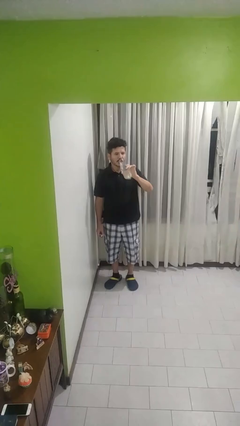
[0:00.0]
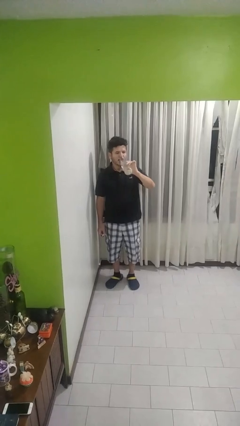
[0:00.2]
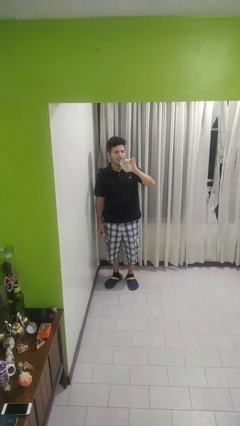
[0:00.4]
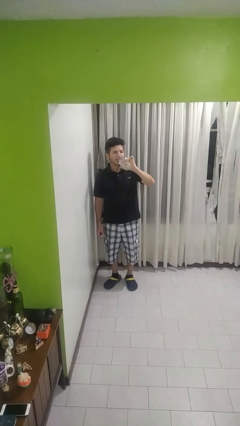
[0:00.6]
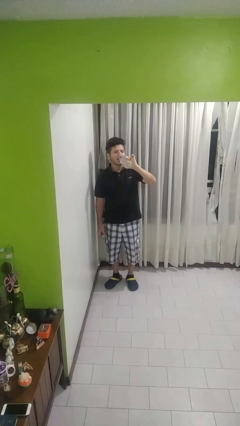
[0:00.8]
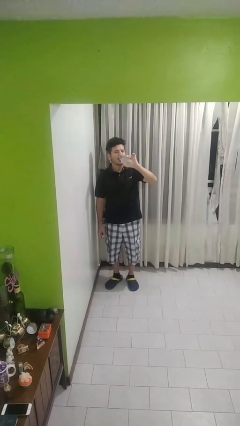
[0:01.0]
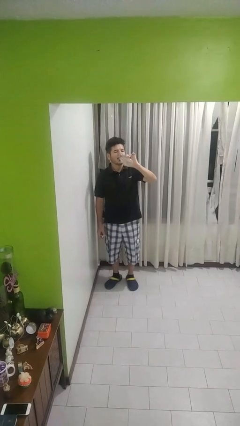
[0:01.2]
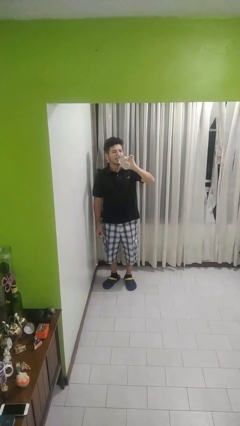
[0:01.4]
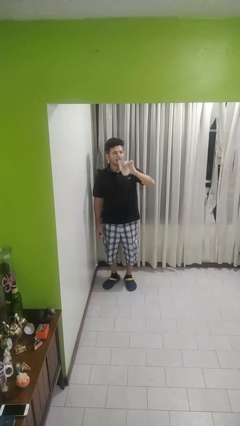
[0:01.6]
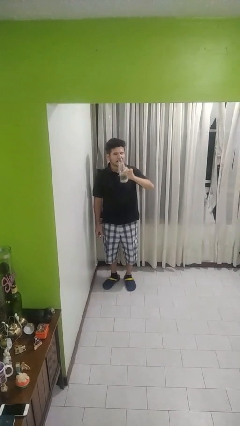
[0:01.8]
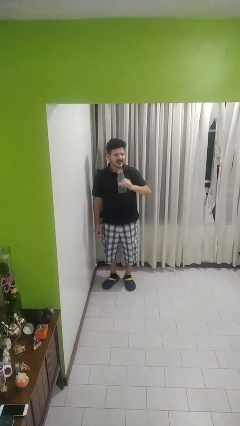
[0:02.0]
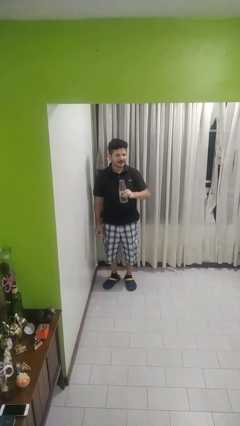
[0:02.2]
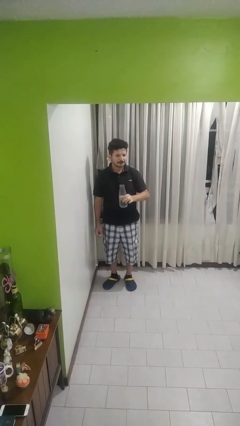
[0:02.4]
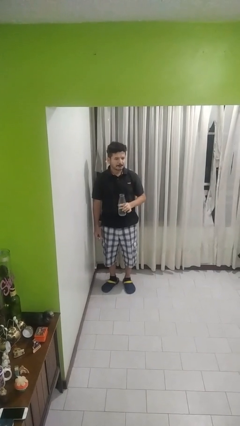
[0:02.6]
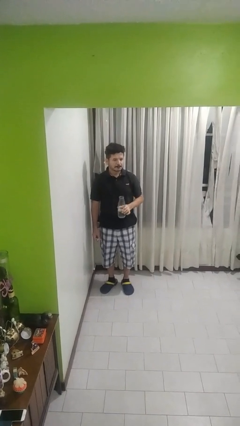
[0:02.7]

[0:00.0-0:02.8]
person drinks from bottle

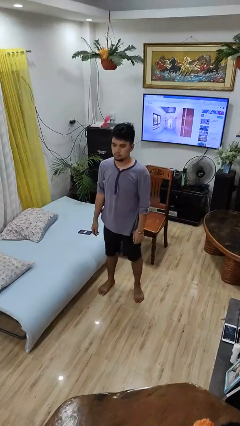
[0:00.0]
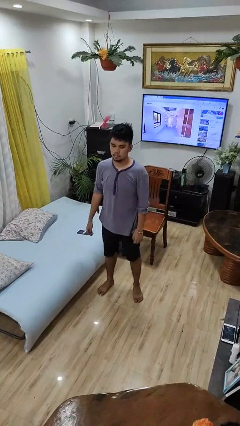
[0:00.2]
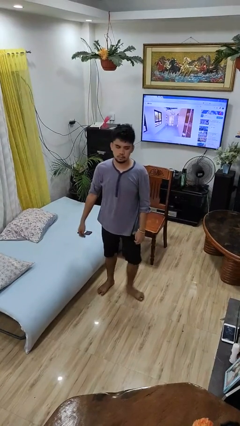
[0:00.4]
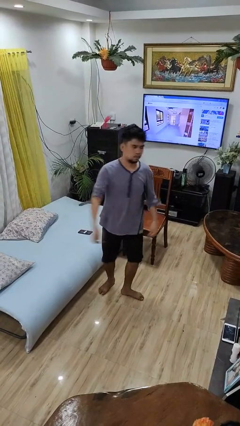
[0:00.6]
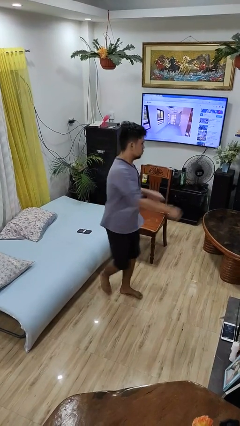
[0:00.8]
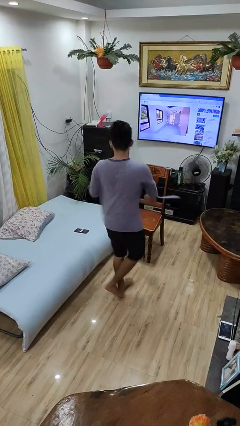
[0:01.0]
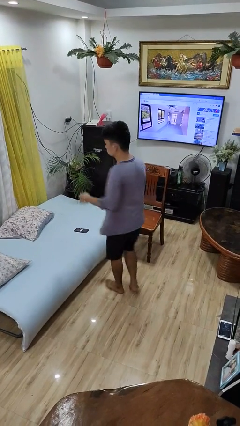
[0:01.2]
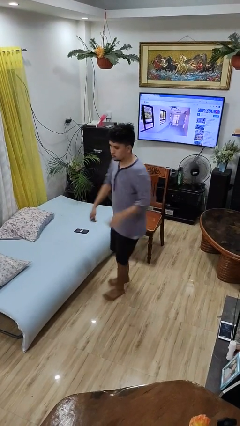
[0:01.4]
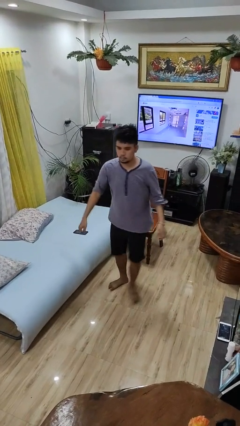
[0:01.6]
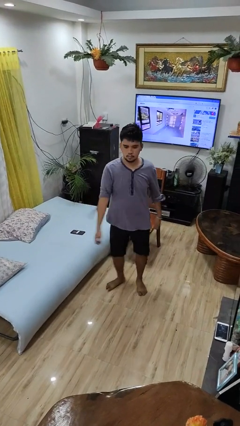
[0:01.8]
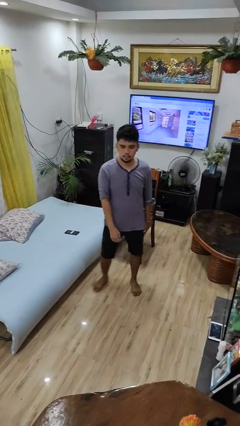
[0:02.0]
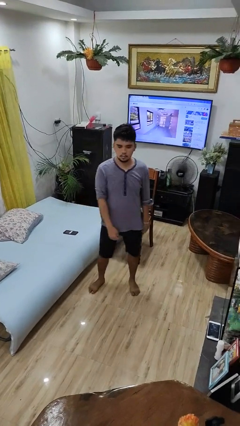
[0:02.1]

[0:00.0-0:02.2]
person twirls

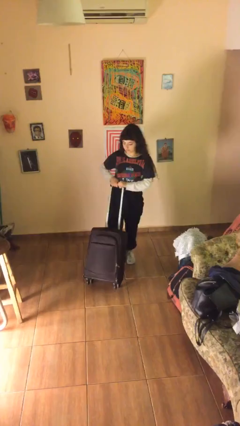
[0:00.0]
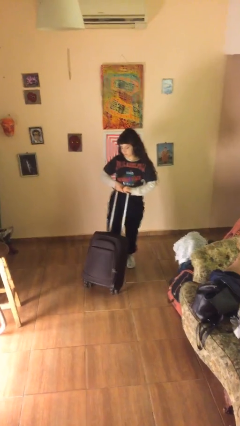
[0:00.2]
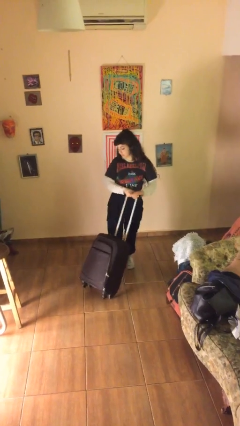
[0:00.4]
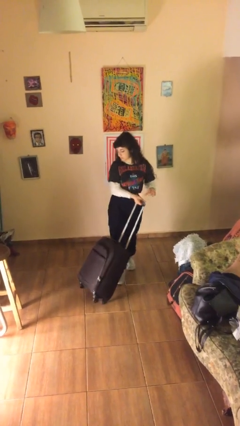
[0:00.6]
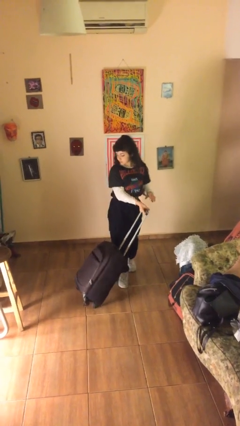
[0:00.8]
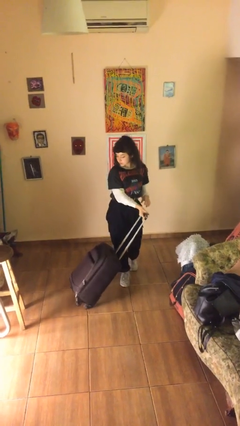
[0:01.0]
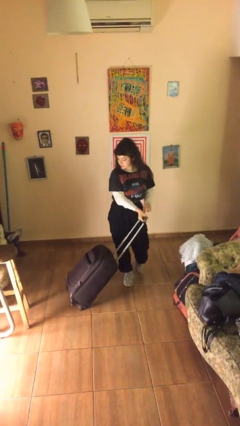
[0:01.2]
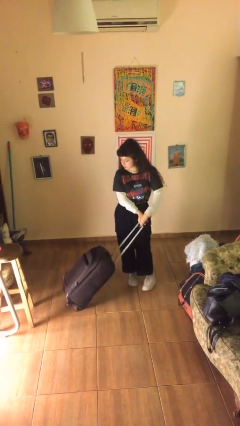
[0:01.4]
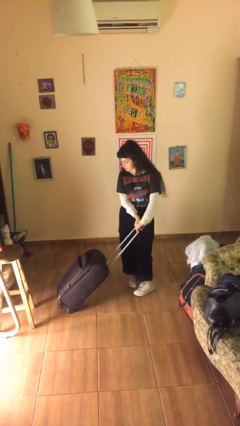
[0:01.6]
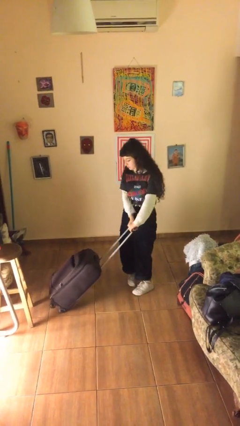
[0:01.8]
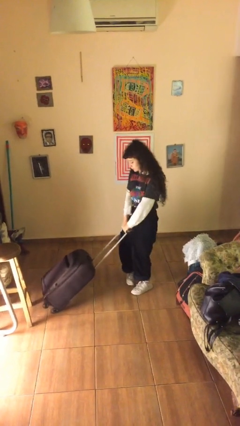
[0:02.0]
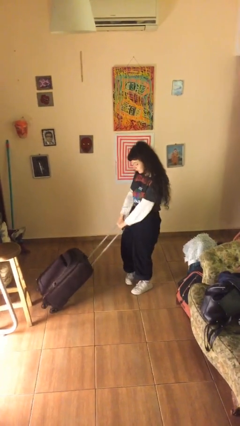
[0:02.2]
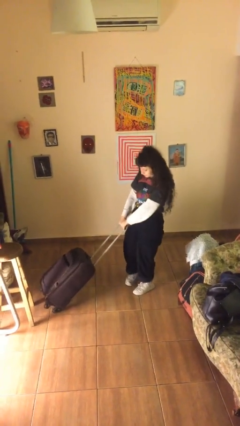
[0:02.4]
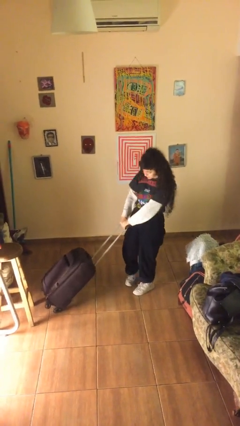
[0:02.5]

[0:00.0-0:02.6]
person pushes wheeled cart

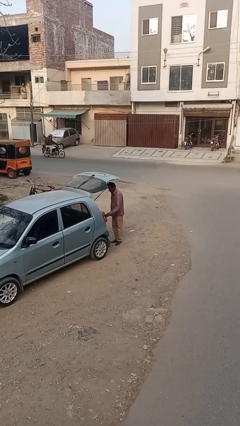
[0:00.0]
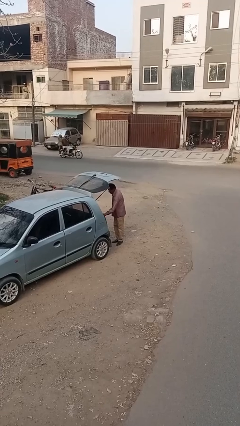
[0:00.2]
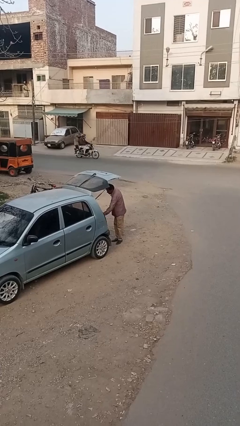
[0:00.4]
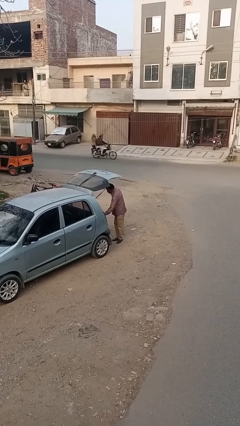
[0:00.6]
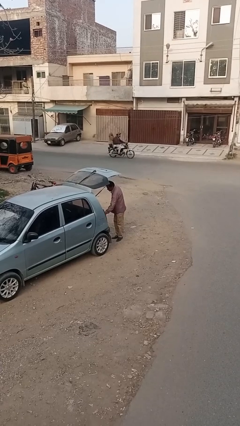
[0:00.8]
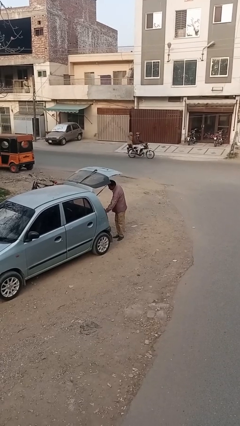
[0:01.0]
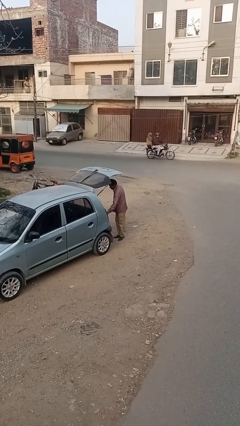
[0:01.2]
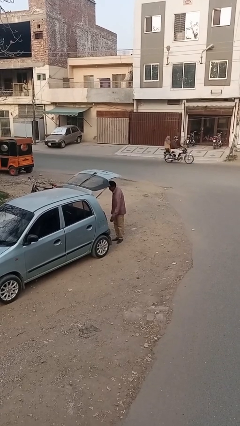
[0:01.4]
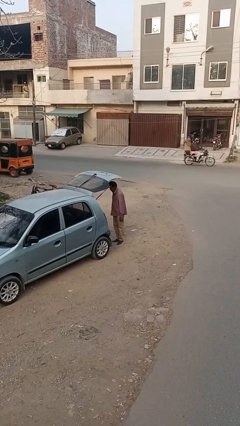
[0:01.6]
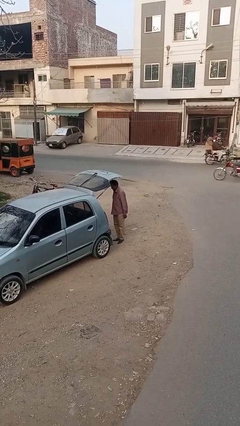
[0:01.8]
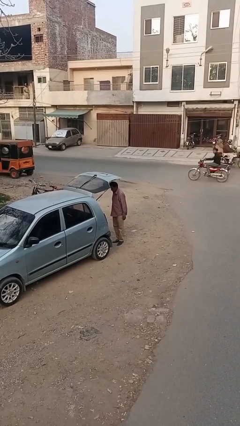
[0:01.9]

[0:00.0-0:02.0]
person loads car

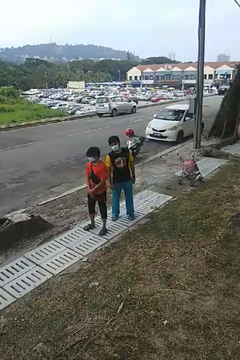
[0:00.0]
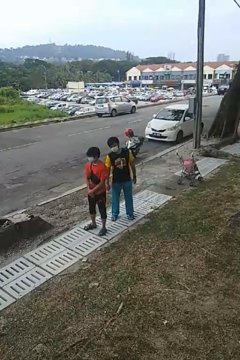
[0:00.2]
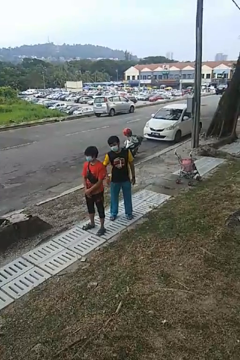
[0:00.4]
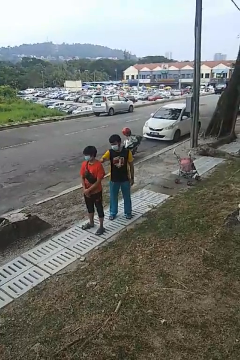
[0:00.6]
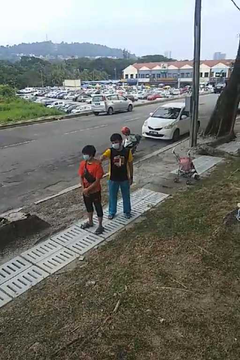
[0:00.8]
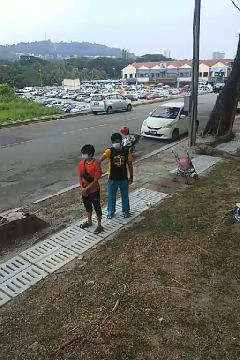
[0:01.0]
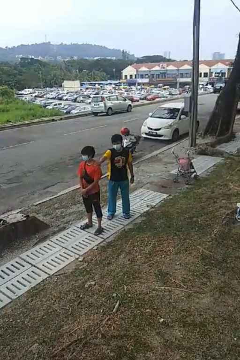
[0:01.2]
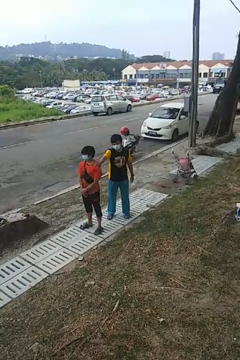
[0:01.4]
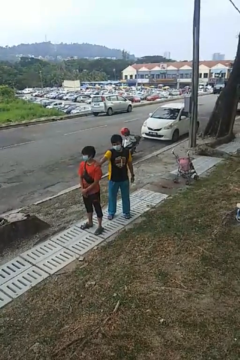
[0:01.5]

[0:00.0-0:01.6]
person grabs person by shoulder

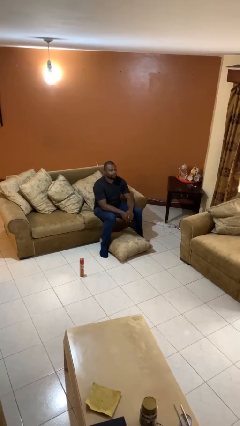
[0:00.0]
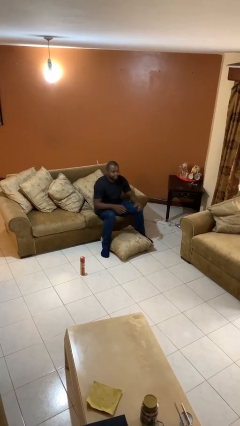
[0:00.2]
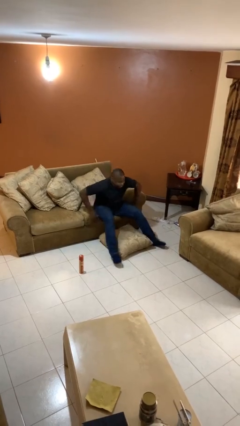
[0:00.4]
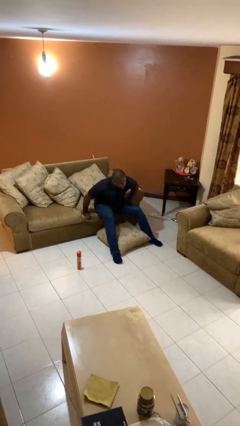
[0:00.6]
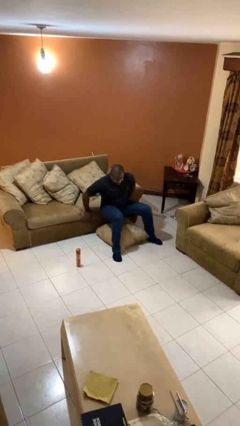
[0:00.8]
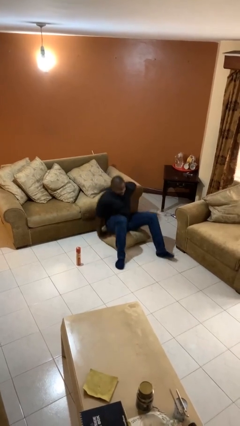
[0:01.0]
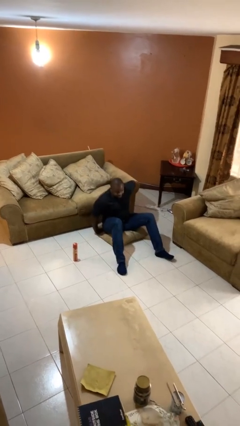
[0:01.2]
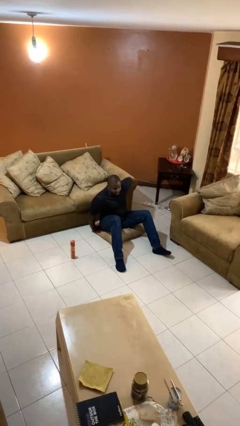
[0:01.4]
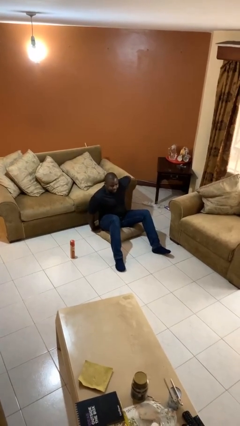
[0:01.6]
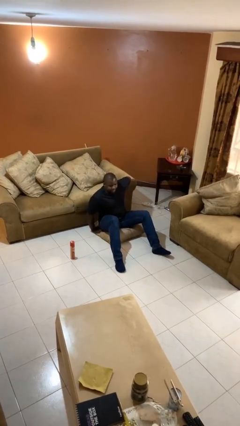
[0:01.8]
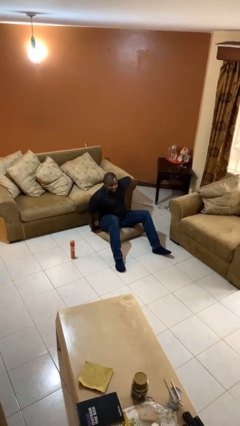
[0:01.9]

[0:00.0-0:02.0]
person falls from chair

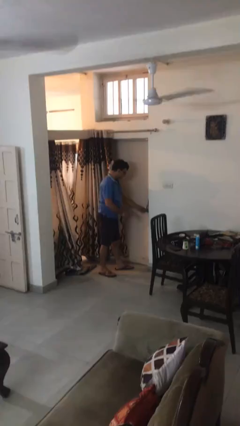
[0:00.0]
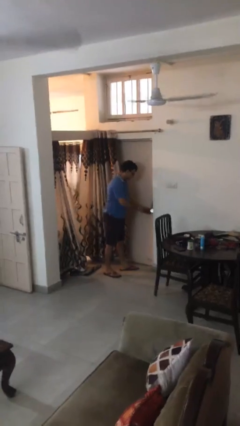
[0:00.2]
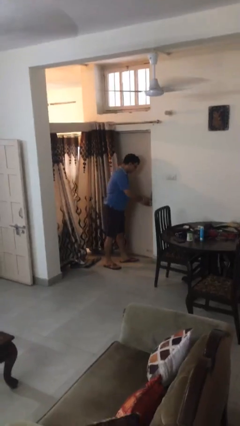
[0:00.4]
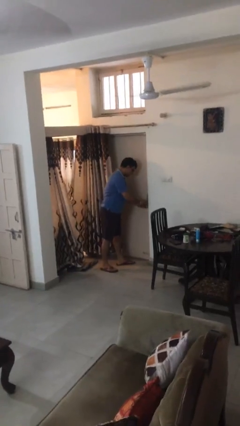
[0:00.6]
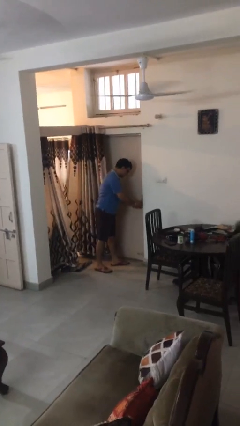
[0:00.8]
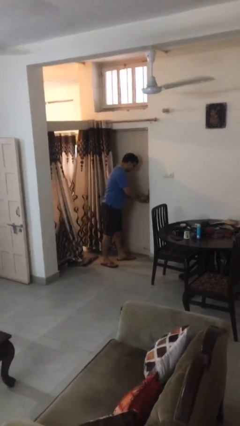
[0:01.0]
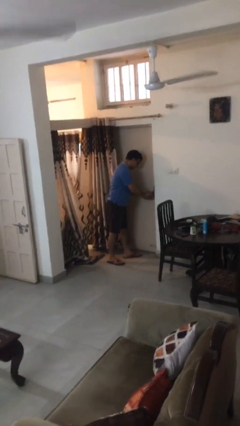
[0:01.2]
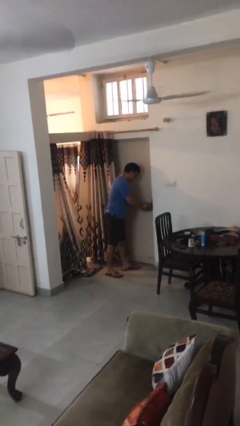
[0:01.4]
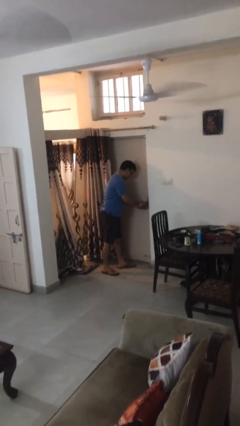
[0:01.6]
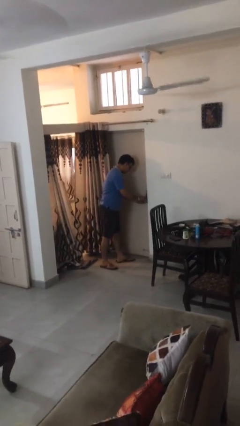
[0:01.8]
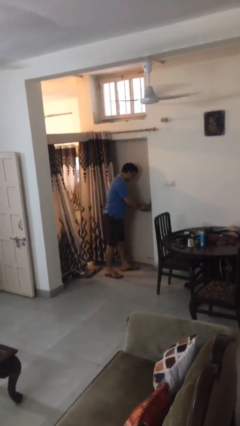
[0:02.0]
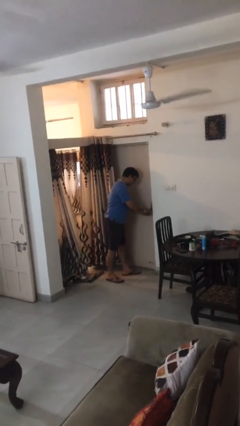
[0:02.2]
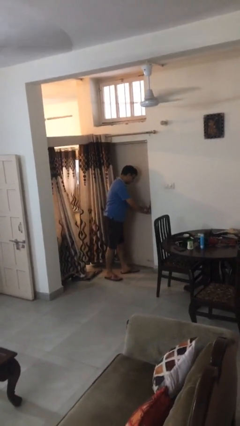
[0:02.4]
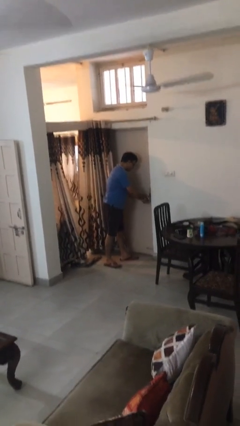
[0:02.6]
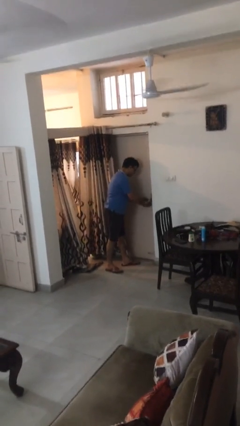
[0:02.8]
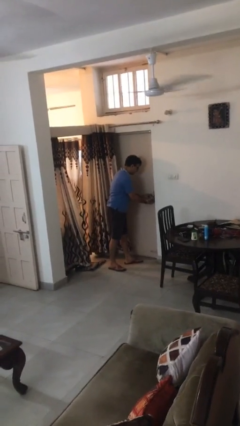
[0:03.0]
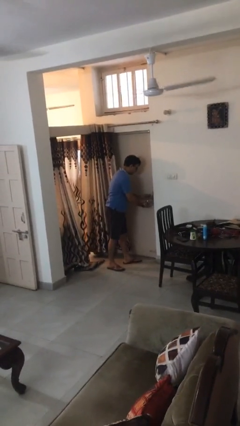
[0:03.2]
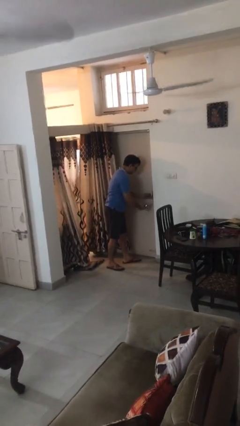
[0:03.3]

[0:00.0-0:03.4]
person unlocks door with keys

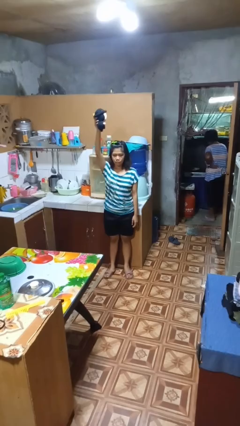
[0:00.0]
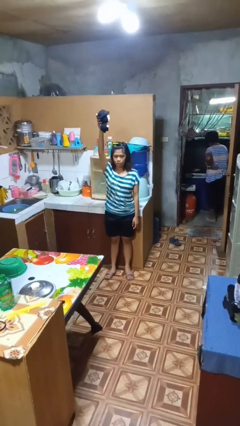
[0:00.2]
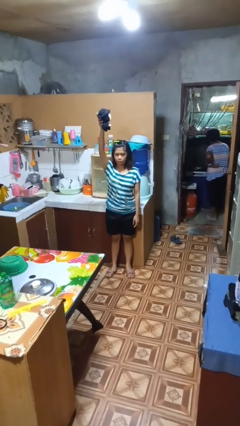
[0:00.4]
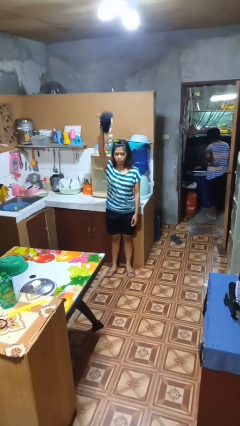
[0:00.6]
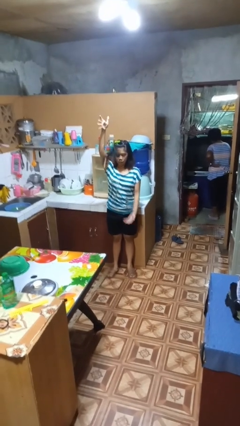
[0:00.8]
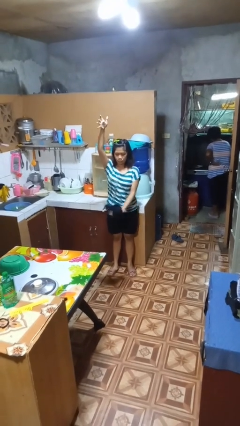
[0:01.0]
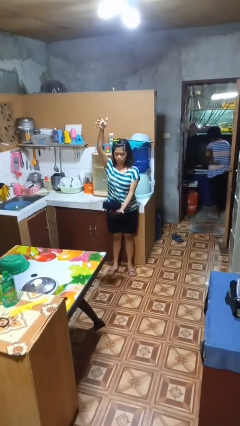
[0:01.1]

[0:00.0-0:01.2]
person drops object
